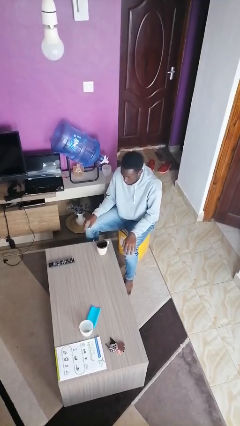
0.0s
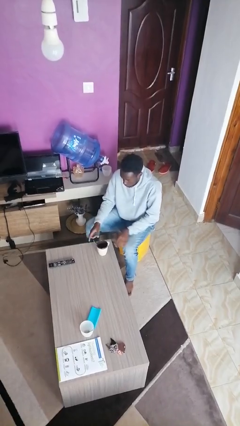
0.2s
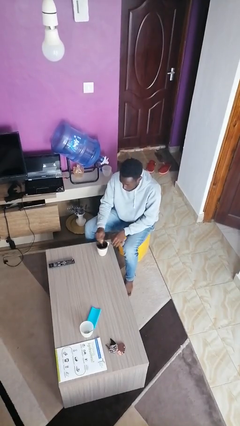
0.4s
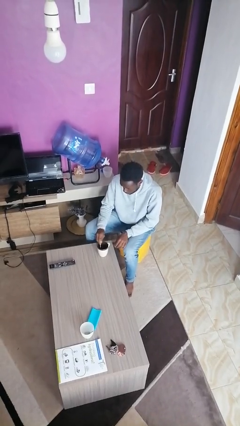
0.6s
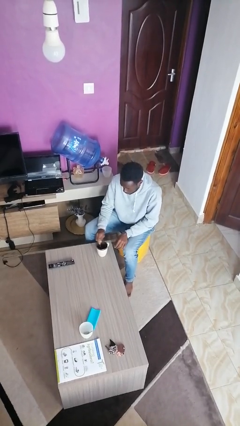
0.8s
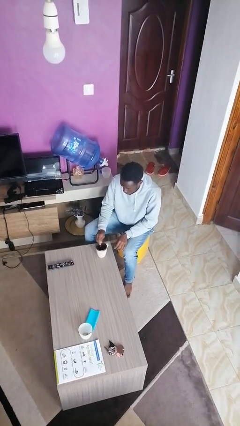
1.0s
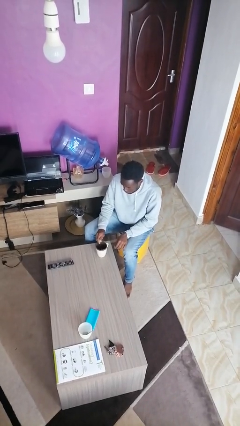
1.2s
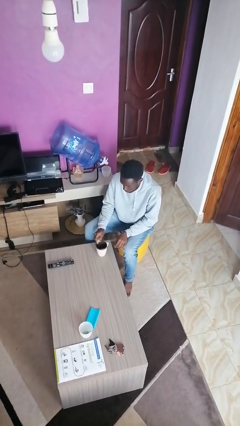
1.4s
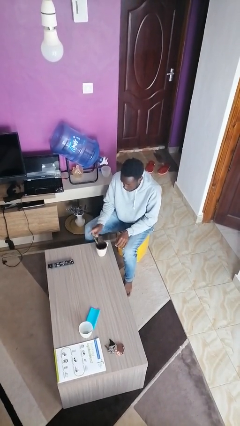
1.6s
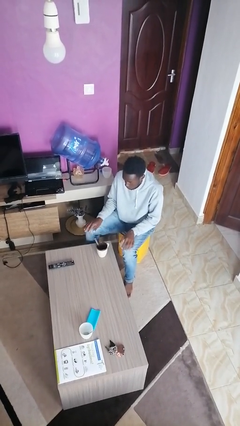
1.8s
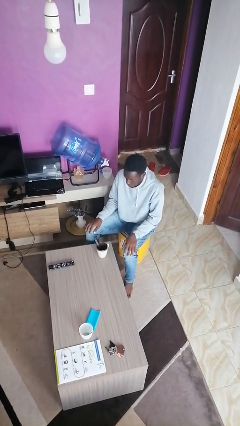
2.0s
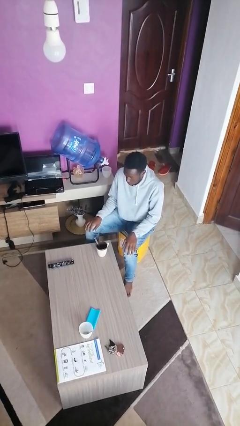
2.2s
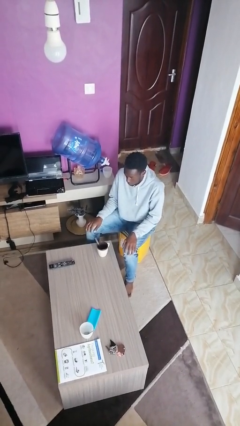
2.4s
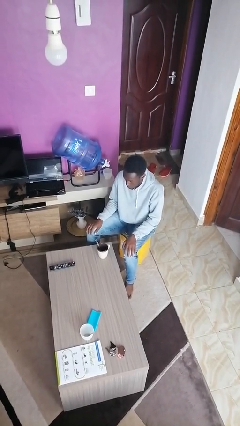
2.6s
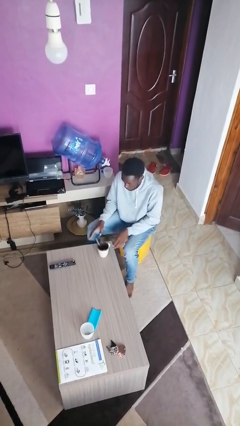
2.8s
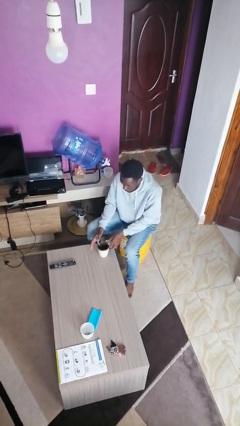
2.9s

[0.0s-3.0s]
person stirs mug

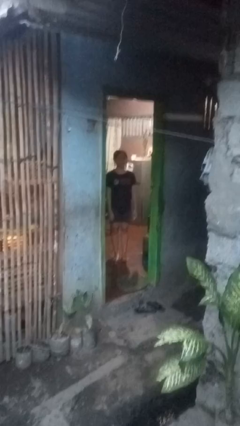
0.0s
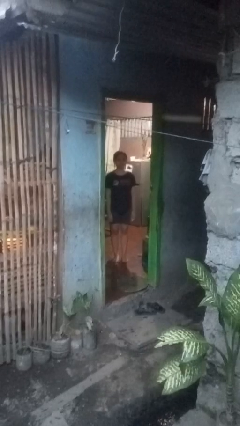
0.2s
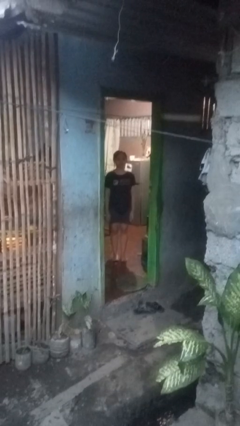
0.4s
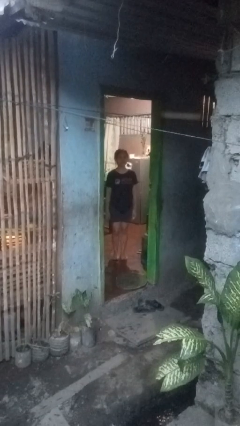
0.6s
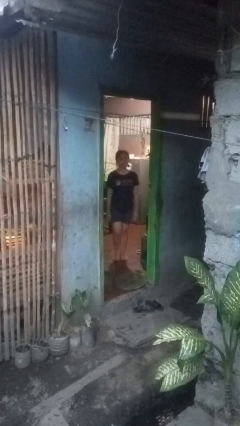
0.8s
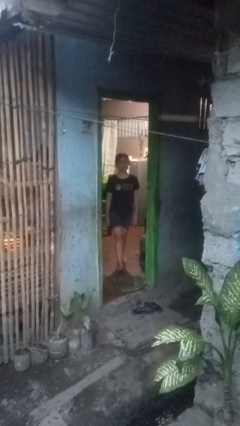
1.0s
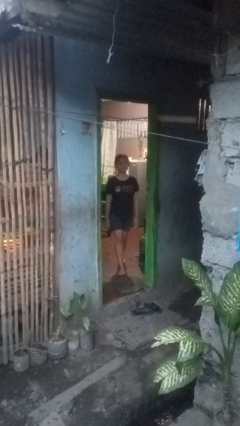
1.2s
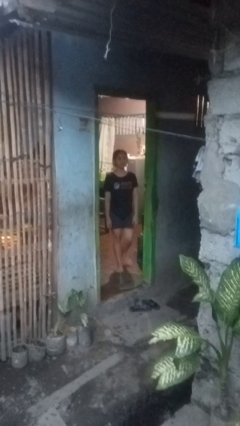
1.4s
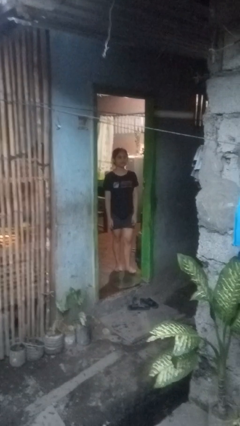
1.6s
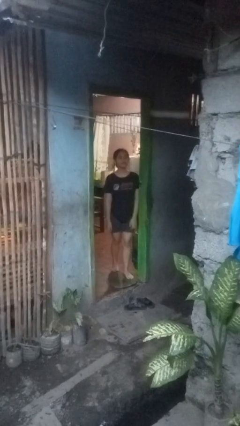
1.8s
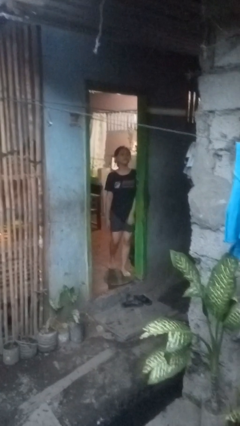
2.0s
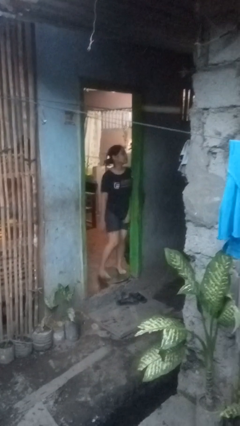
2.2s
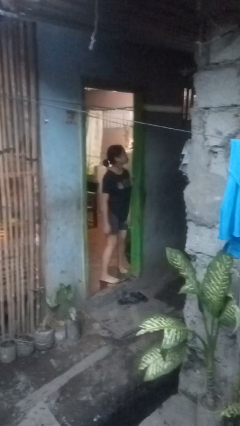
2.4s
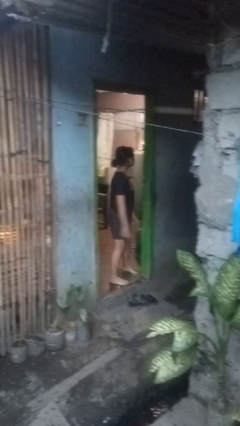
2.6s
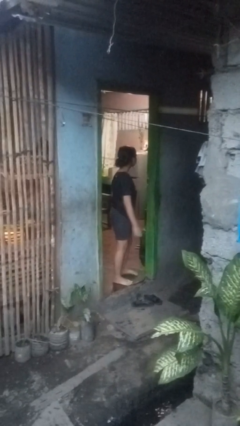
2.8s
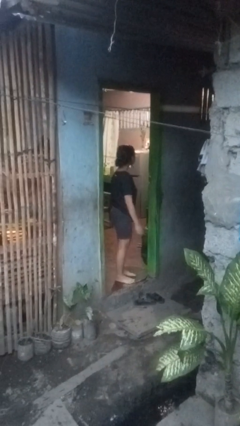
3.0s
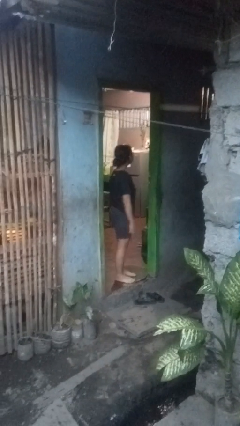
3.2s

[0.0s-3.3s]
person bumps into wall

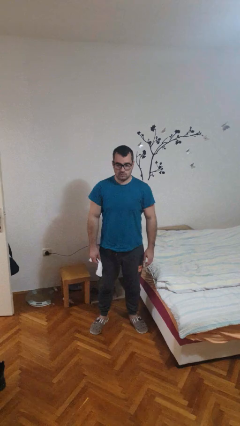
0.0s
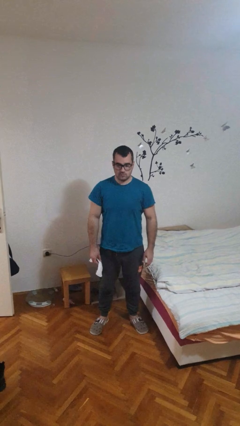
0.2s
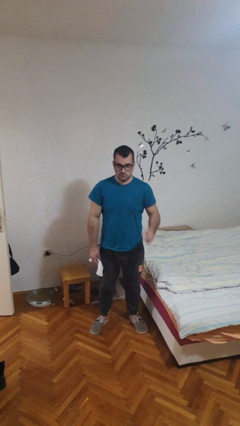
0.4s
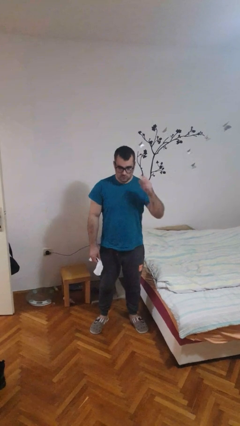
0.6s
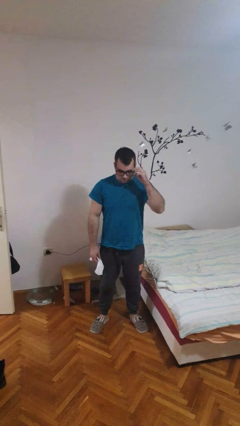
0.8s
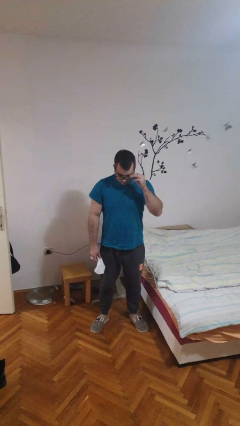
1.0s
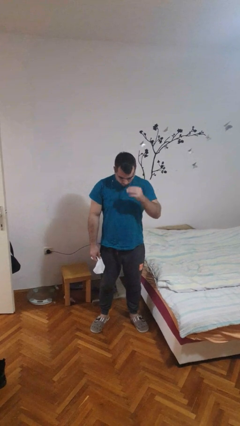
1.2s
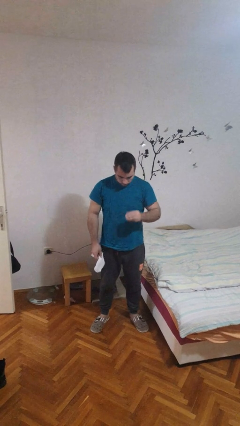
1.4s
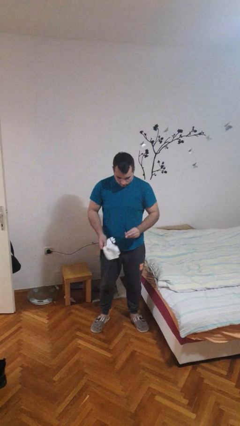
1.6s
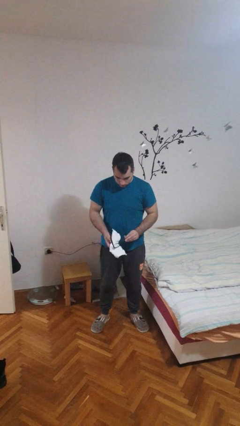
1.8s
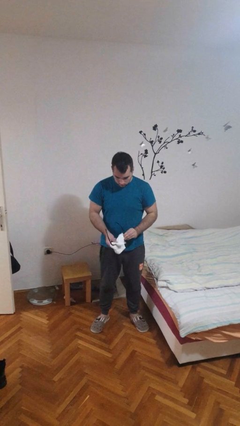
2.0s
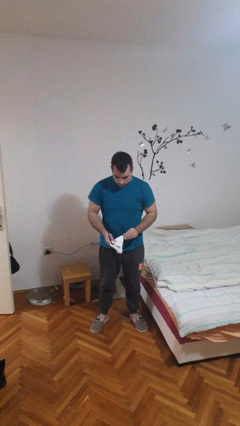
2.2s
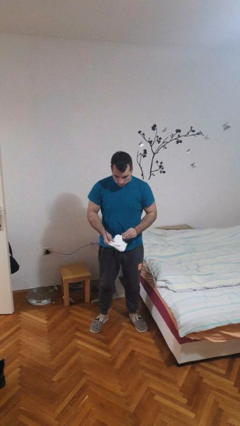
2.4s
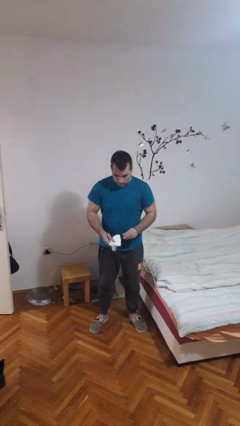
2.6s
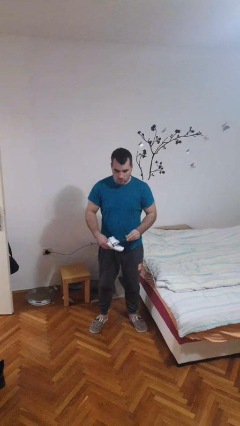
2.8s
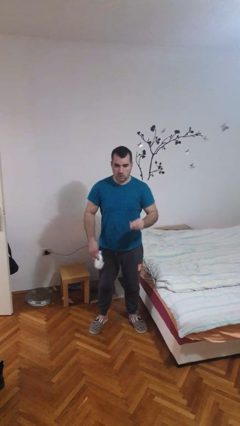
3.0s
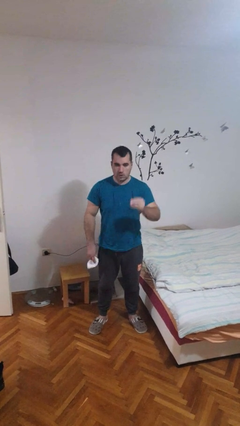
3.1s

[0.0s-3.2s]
person cleans eyeglasses

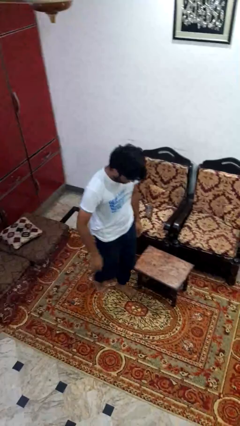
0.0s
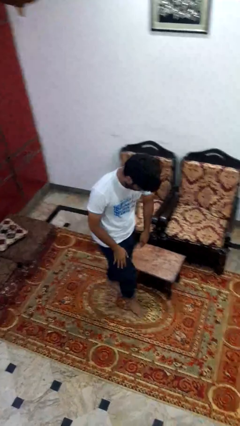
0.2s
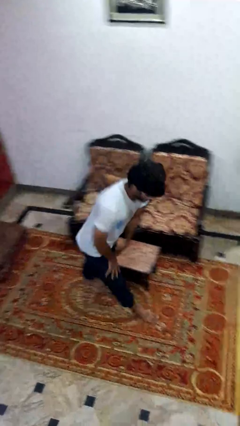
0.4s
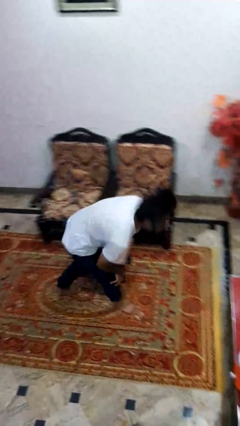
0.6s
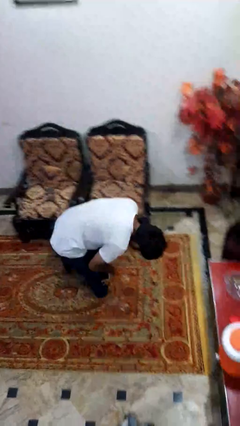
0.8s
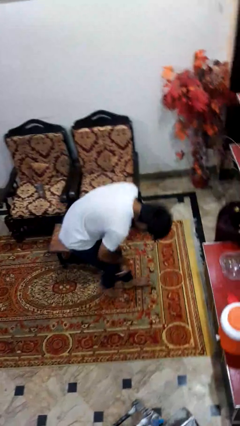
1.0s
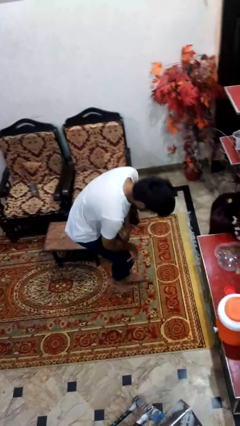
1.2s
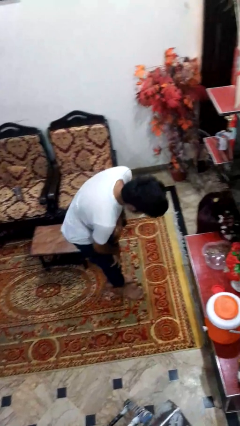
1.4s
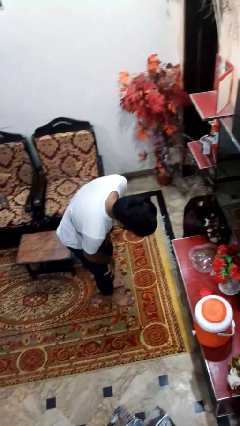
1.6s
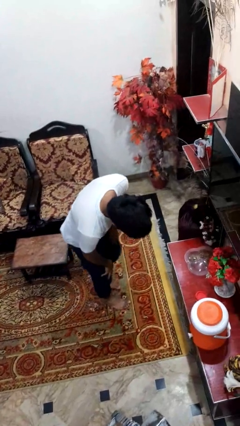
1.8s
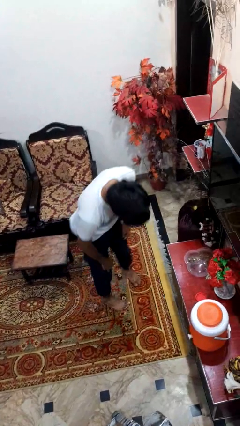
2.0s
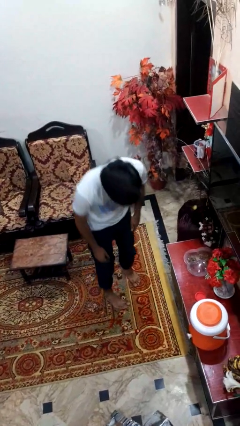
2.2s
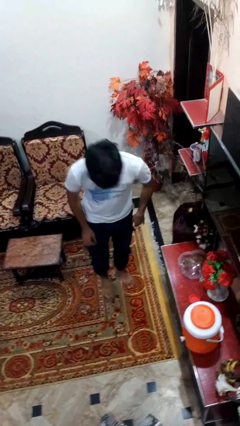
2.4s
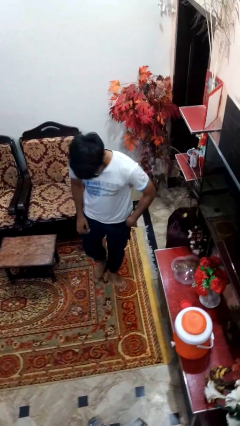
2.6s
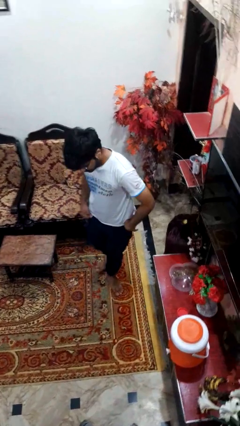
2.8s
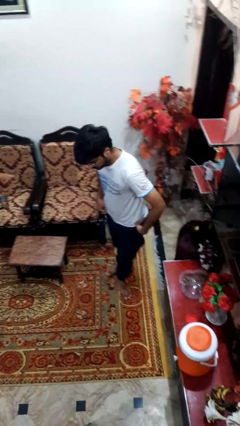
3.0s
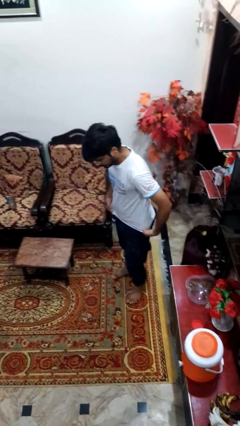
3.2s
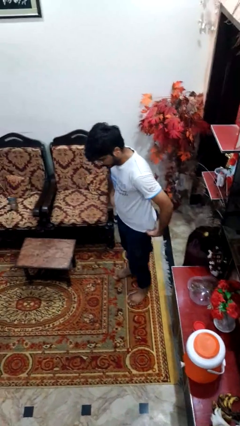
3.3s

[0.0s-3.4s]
person bumps into table

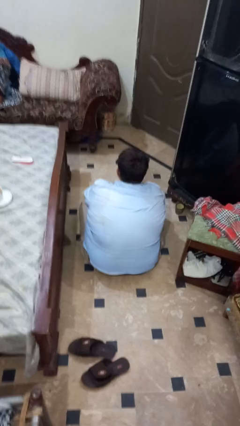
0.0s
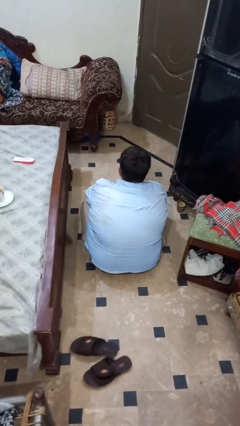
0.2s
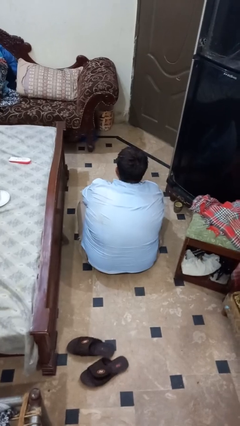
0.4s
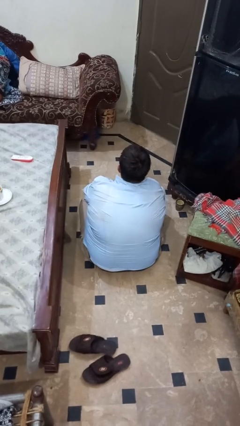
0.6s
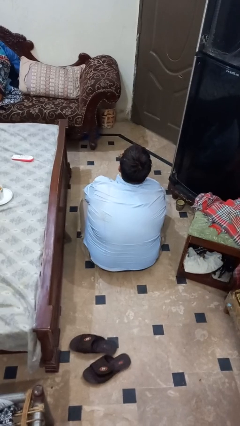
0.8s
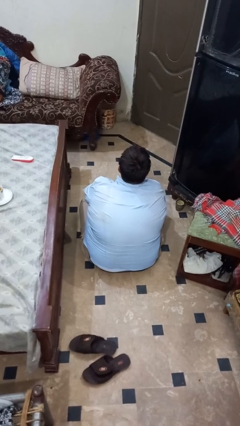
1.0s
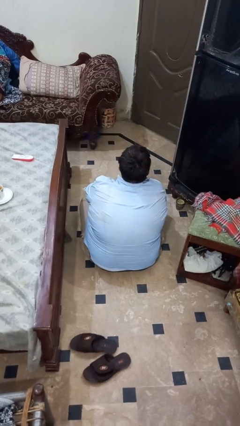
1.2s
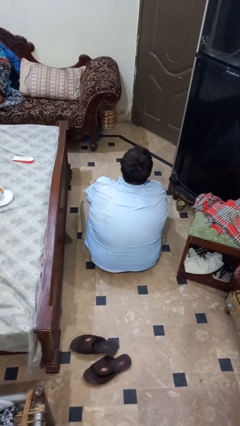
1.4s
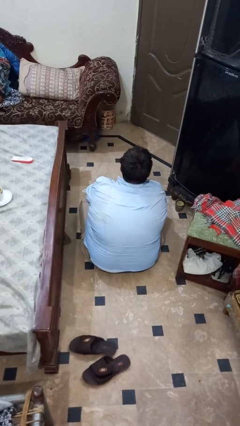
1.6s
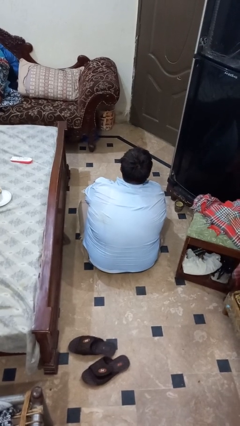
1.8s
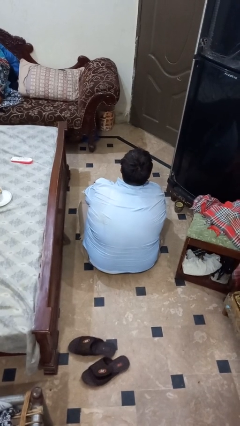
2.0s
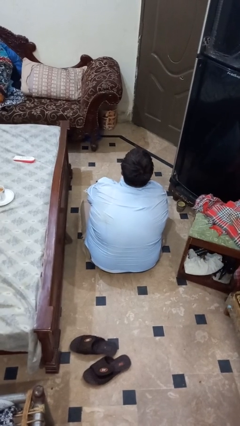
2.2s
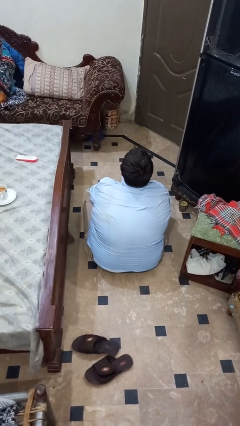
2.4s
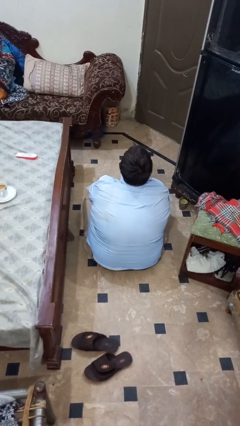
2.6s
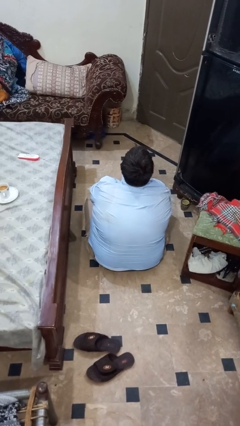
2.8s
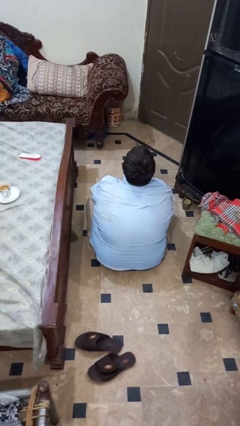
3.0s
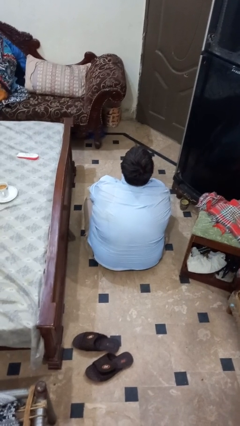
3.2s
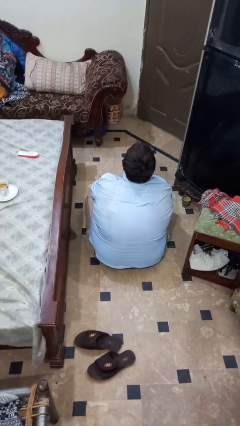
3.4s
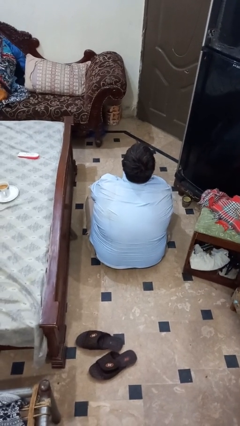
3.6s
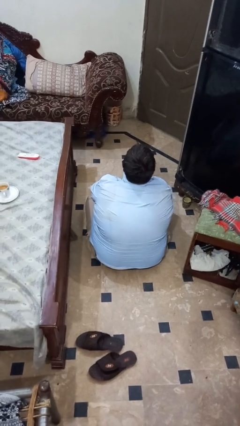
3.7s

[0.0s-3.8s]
person strokes chin

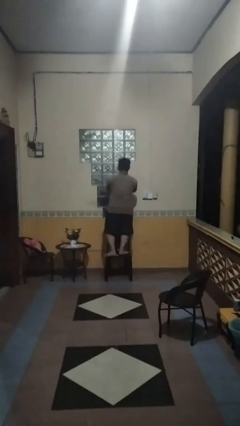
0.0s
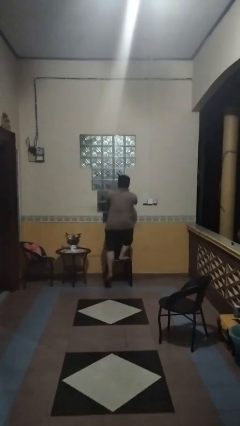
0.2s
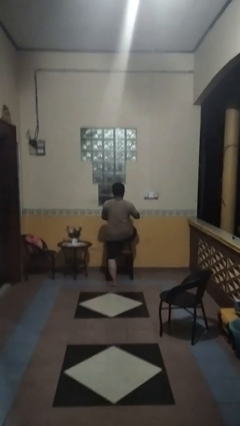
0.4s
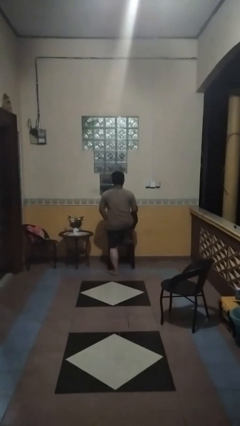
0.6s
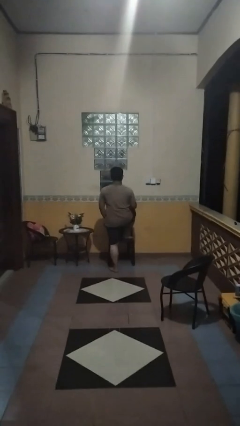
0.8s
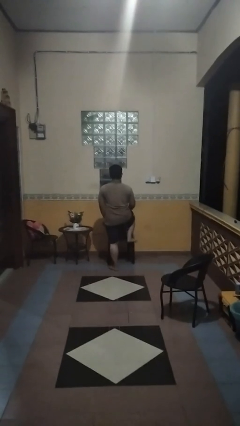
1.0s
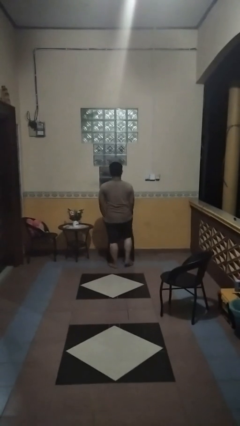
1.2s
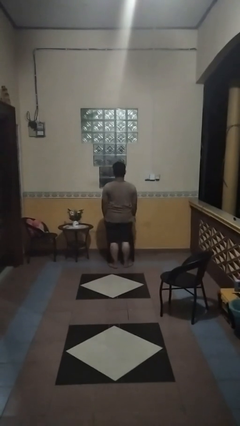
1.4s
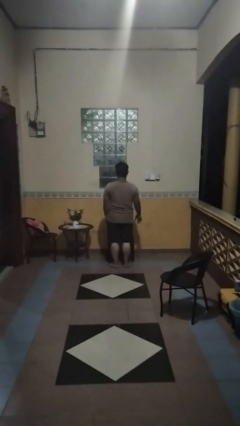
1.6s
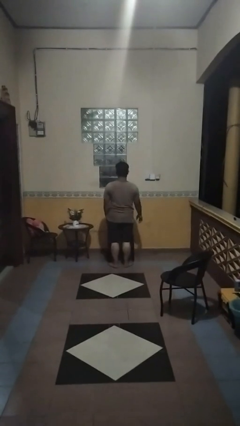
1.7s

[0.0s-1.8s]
person climbs off chair
